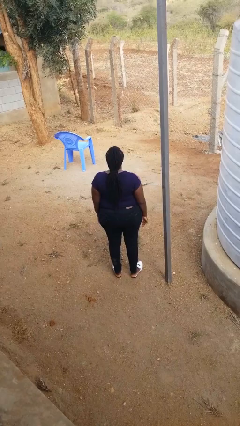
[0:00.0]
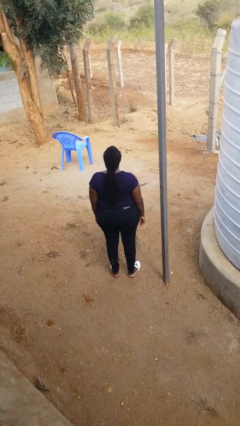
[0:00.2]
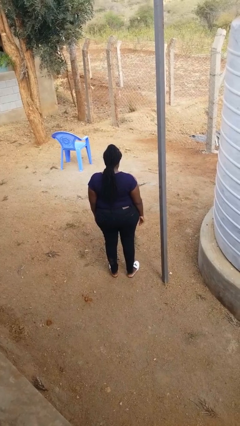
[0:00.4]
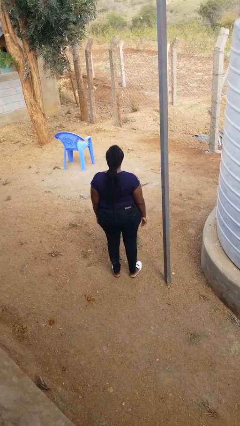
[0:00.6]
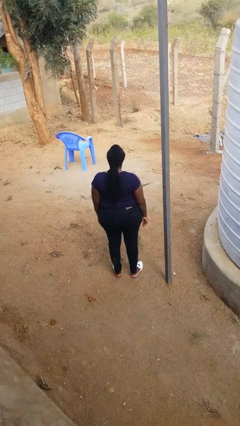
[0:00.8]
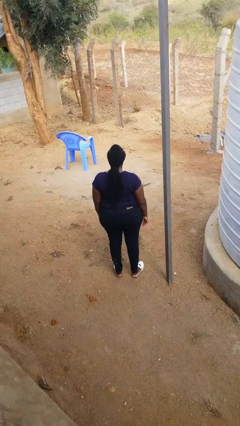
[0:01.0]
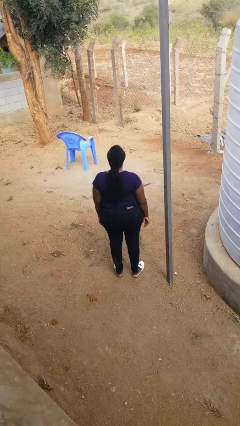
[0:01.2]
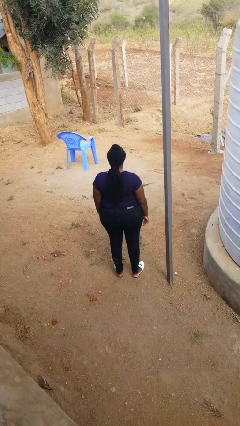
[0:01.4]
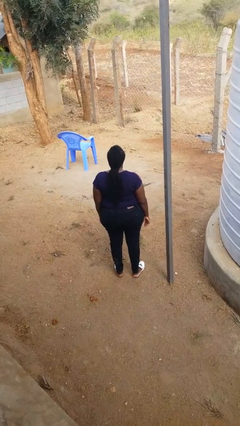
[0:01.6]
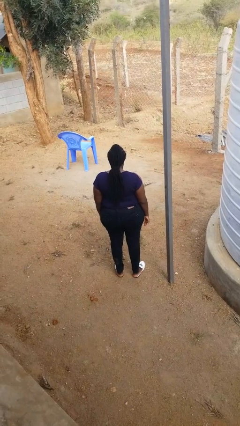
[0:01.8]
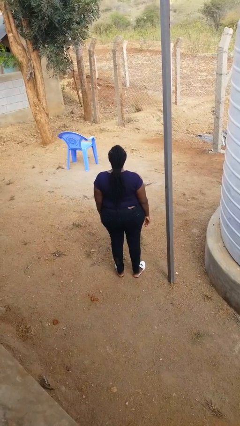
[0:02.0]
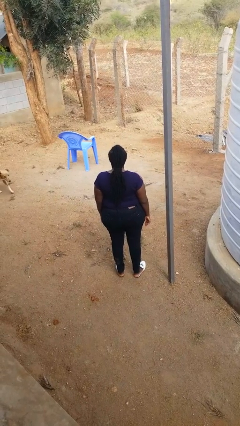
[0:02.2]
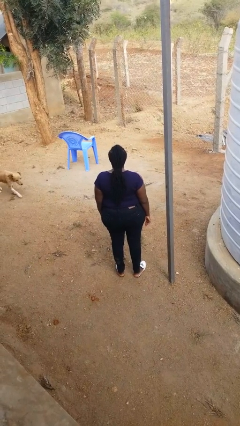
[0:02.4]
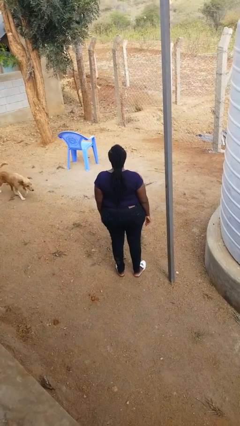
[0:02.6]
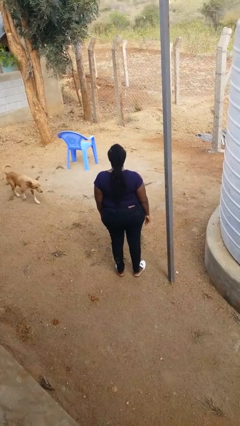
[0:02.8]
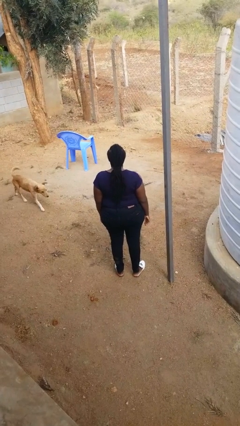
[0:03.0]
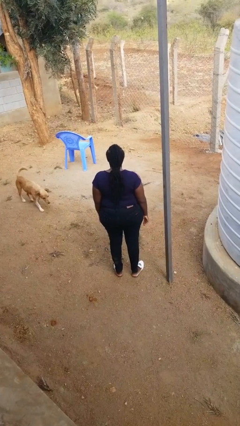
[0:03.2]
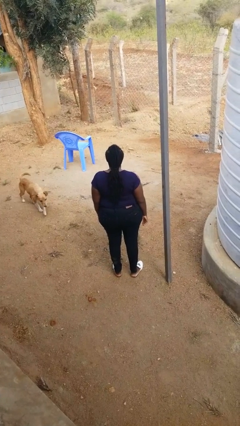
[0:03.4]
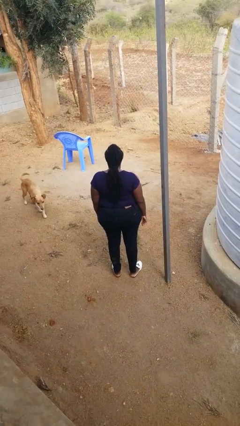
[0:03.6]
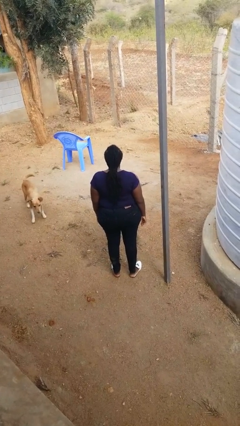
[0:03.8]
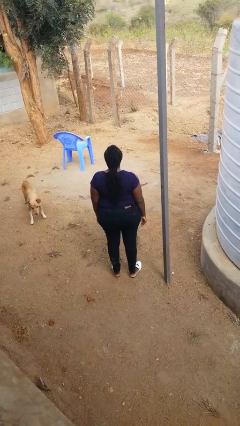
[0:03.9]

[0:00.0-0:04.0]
person nods head

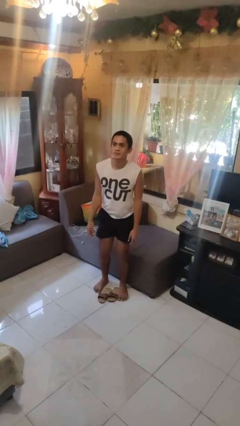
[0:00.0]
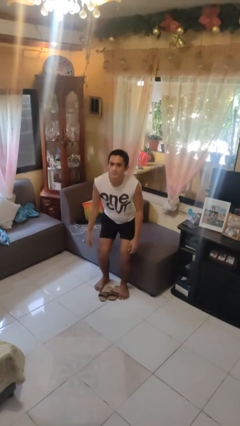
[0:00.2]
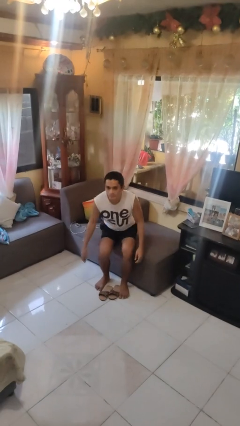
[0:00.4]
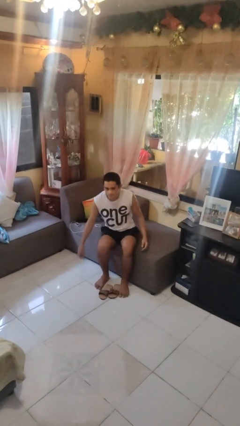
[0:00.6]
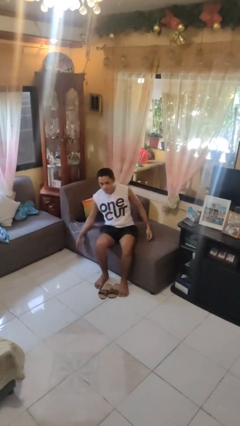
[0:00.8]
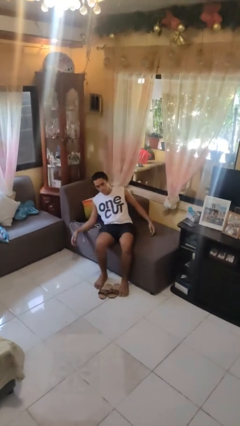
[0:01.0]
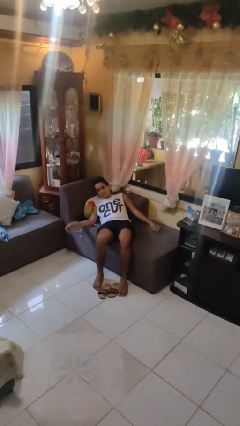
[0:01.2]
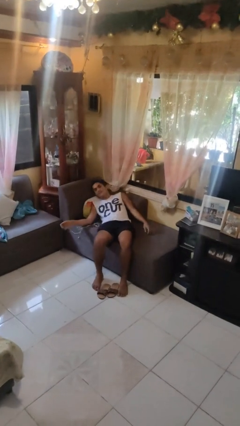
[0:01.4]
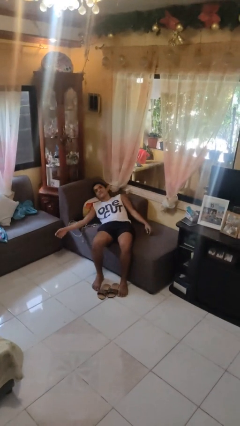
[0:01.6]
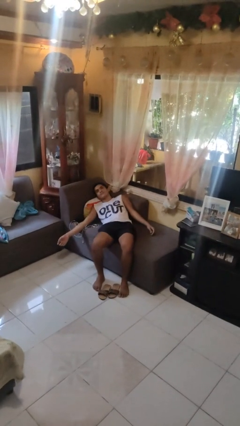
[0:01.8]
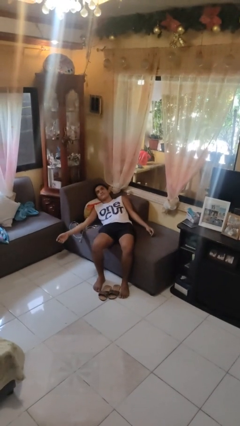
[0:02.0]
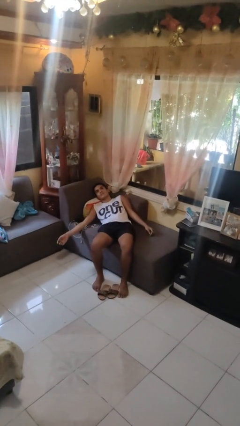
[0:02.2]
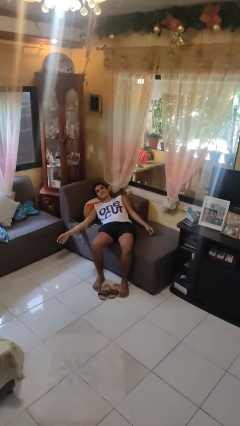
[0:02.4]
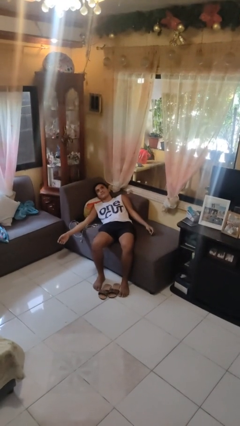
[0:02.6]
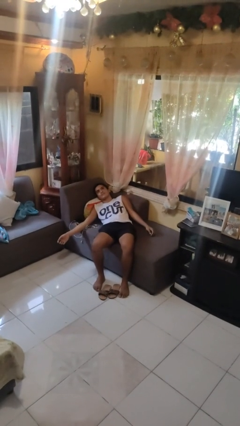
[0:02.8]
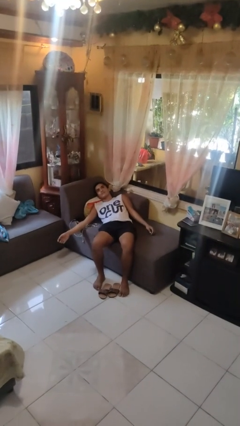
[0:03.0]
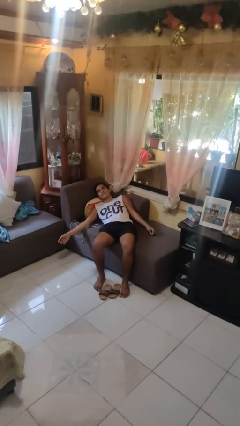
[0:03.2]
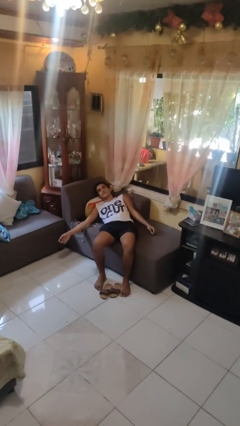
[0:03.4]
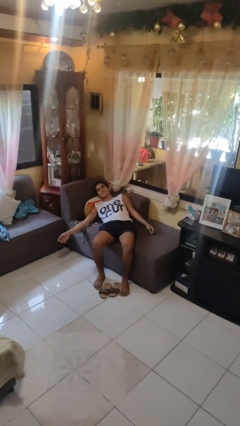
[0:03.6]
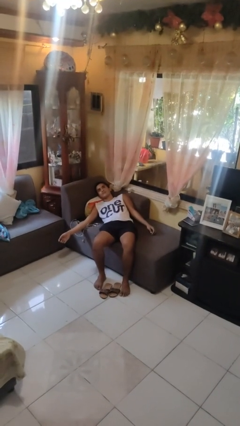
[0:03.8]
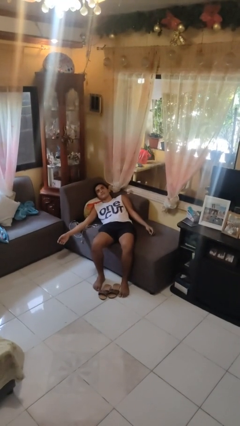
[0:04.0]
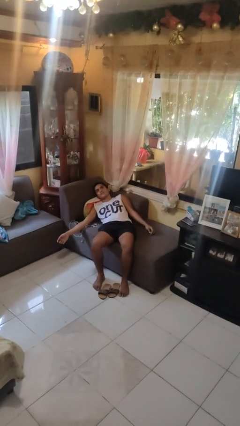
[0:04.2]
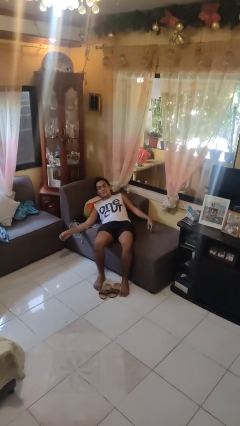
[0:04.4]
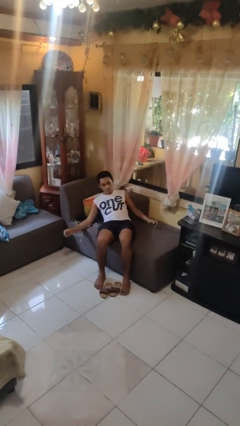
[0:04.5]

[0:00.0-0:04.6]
person lies down on couch

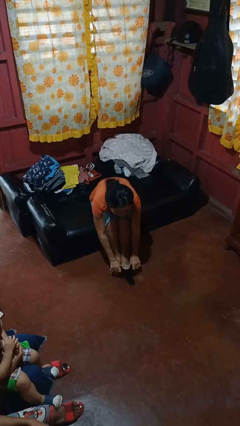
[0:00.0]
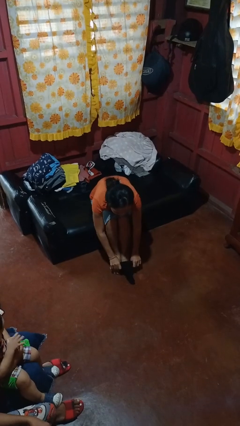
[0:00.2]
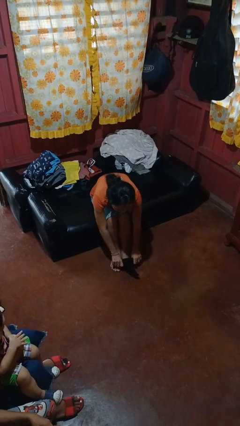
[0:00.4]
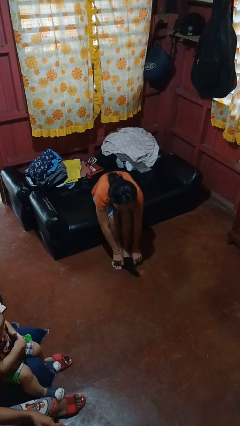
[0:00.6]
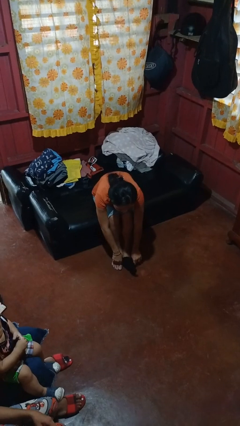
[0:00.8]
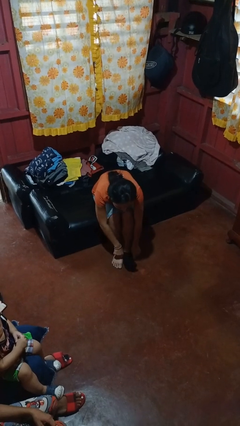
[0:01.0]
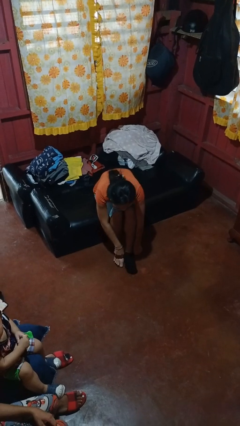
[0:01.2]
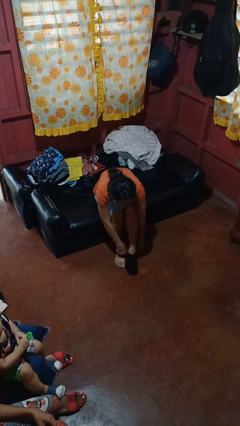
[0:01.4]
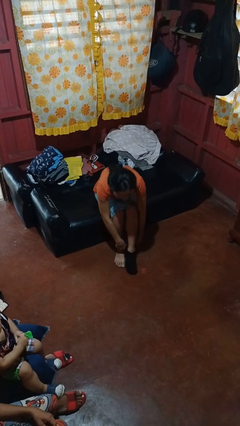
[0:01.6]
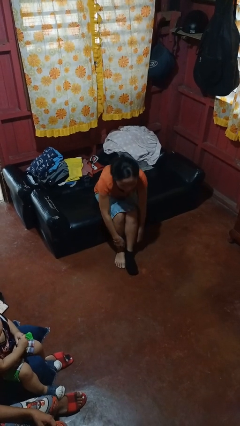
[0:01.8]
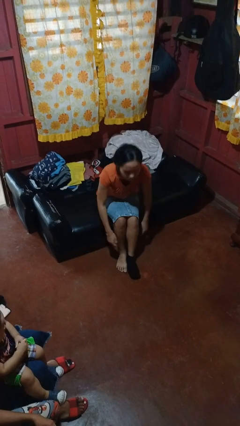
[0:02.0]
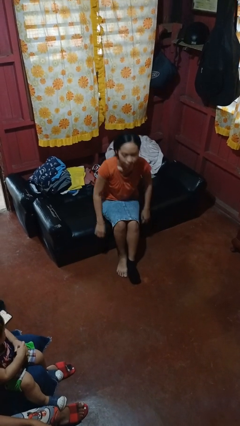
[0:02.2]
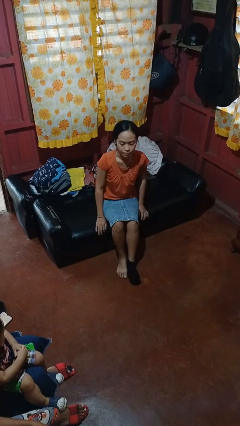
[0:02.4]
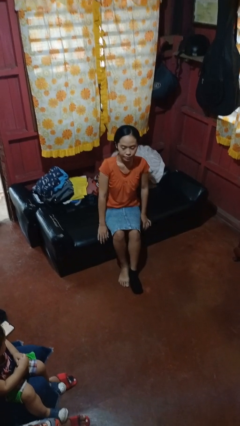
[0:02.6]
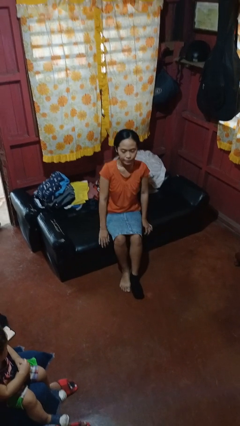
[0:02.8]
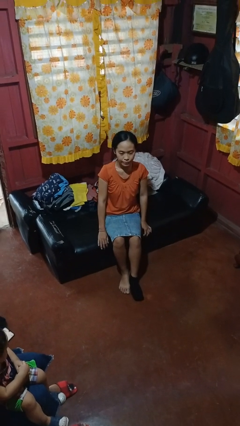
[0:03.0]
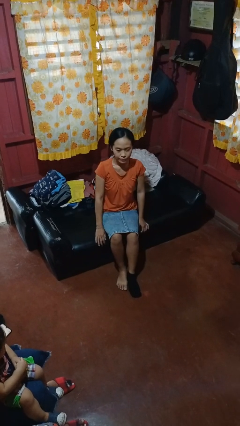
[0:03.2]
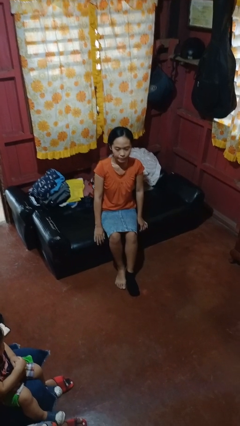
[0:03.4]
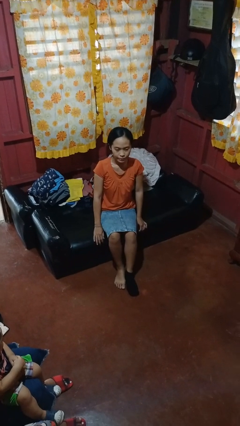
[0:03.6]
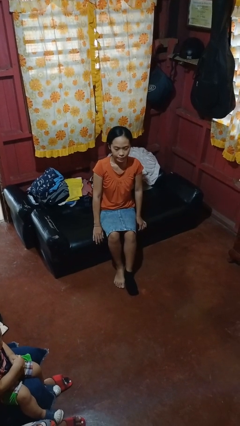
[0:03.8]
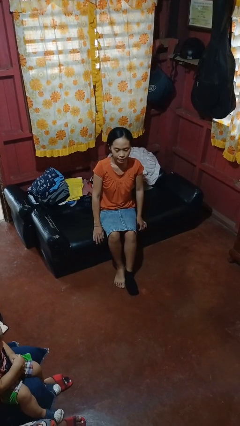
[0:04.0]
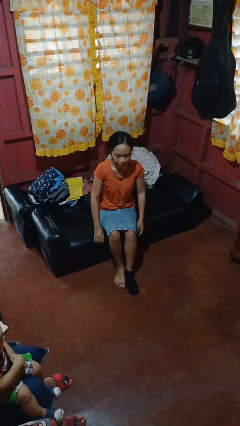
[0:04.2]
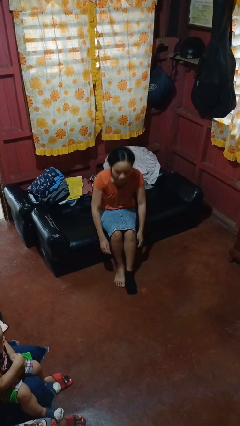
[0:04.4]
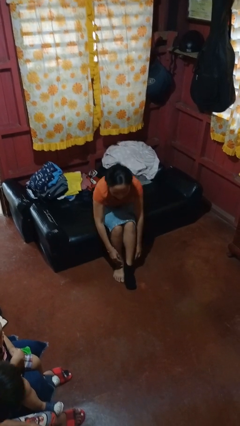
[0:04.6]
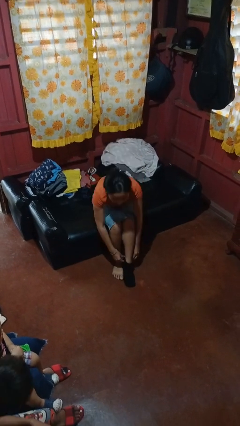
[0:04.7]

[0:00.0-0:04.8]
person puts on socks

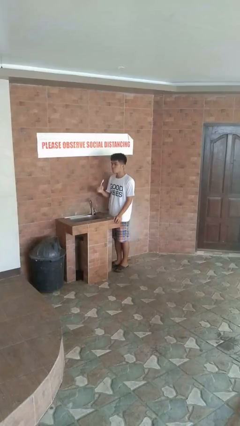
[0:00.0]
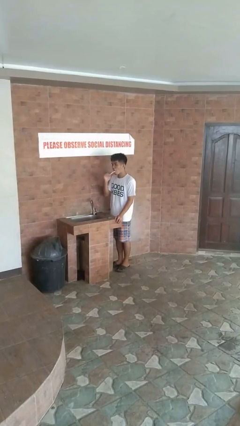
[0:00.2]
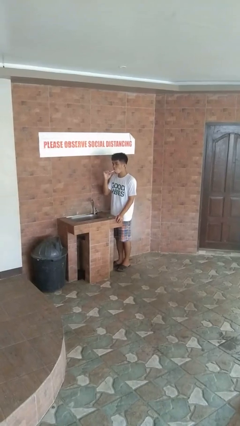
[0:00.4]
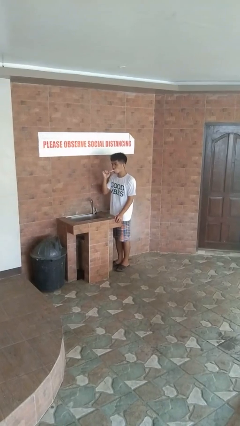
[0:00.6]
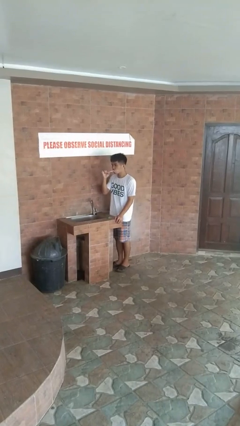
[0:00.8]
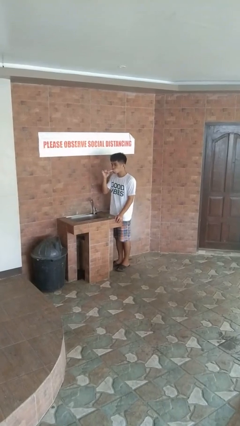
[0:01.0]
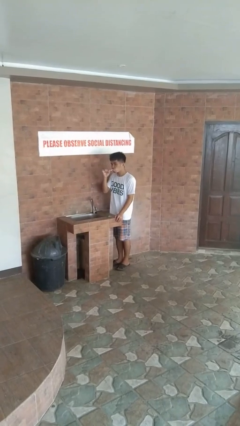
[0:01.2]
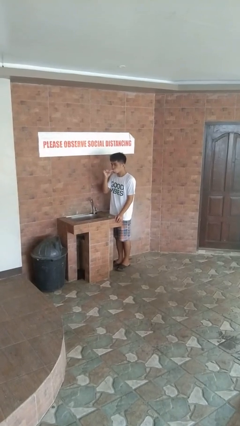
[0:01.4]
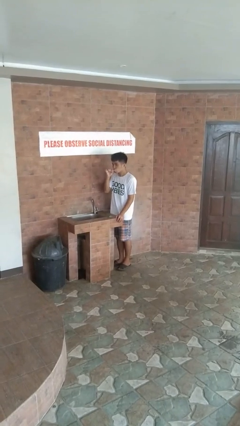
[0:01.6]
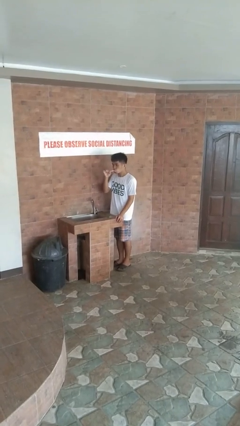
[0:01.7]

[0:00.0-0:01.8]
person brushes teeth

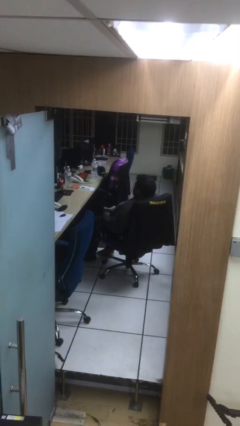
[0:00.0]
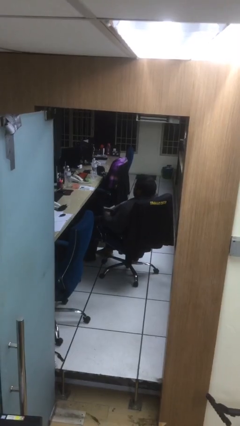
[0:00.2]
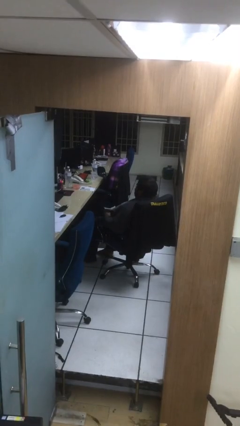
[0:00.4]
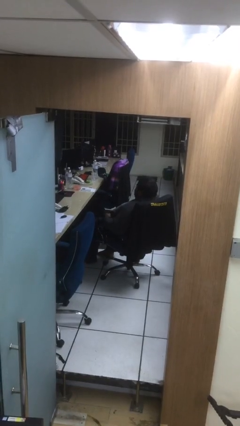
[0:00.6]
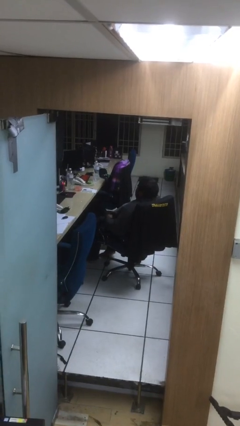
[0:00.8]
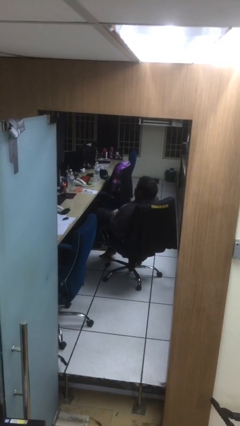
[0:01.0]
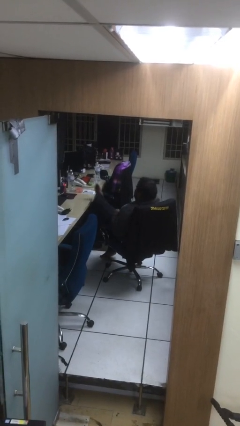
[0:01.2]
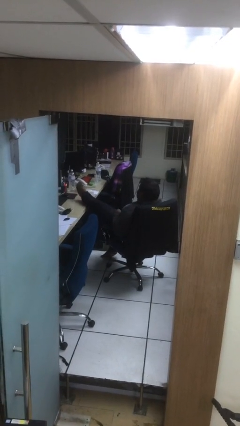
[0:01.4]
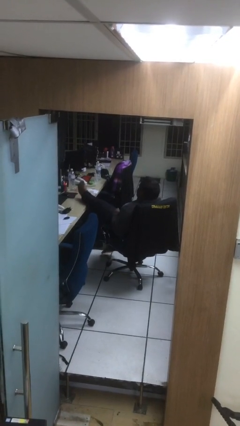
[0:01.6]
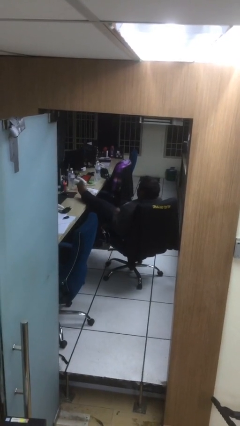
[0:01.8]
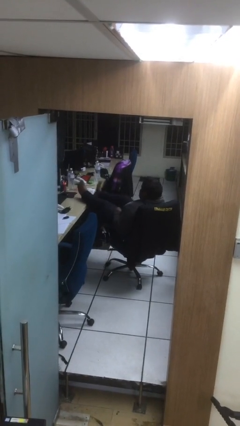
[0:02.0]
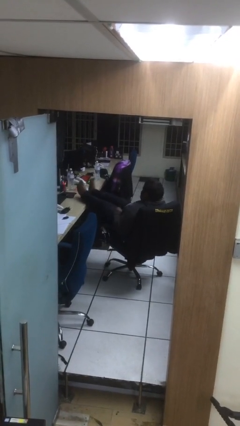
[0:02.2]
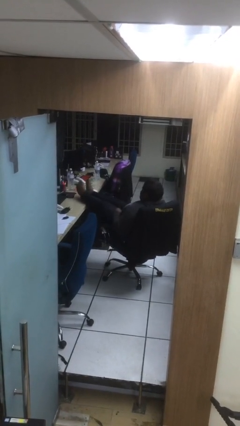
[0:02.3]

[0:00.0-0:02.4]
person puts feet up
